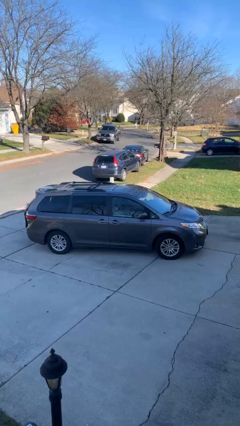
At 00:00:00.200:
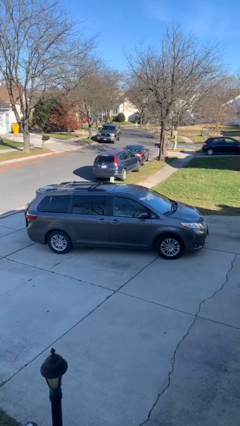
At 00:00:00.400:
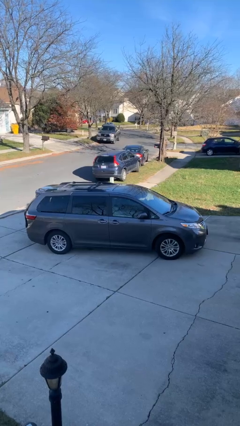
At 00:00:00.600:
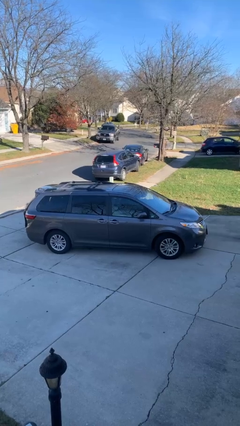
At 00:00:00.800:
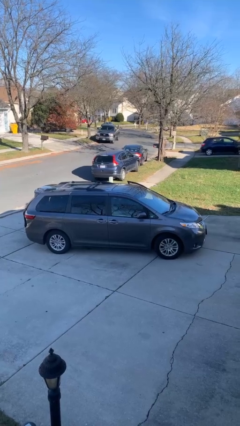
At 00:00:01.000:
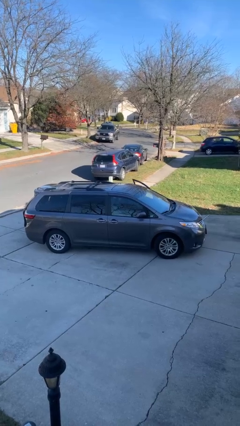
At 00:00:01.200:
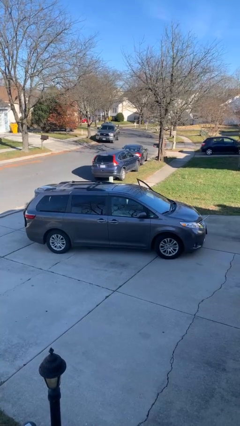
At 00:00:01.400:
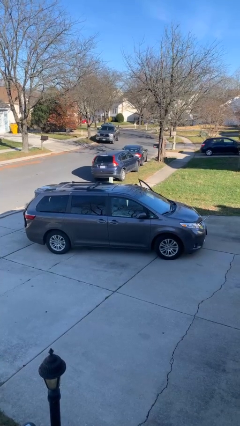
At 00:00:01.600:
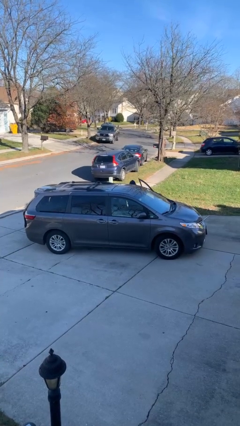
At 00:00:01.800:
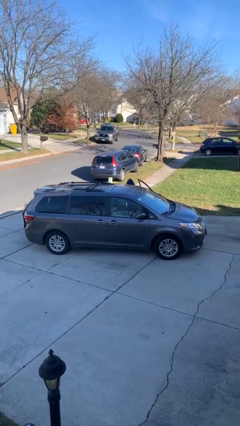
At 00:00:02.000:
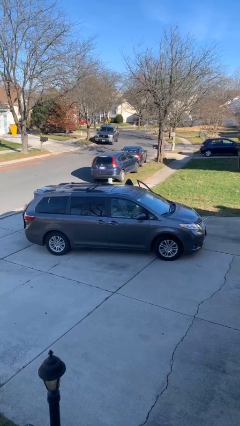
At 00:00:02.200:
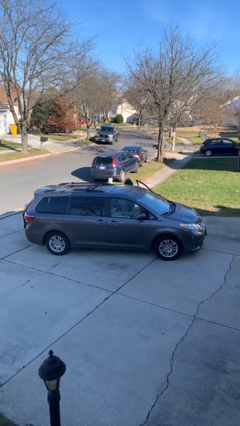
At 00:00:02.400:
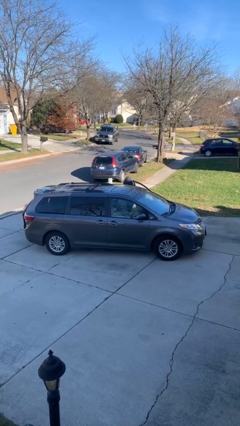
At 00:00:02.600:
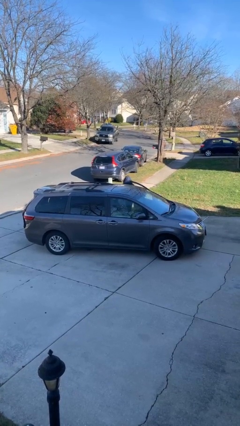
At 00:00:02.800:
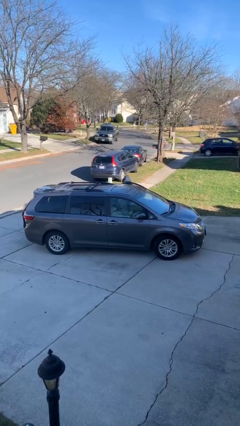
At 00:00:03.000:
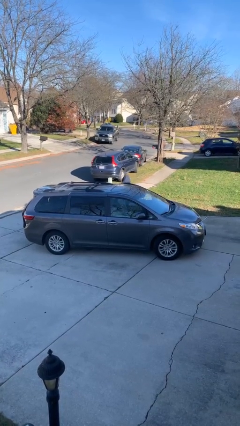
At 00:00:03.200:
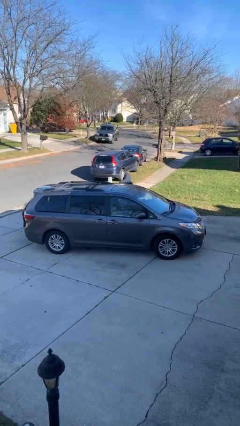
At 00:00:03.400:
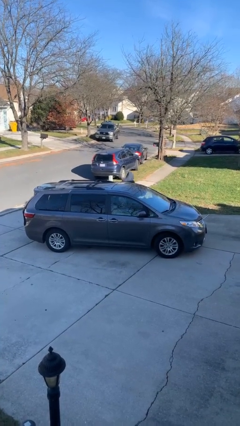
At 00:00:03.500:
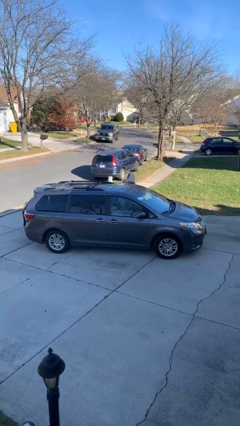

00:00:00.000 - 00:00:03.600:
car drops off person

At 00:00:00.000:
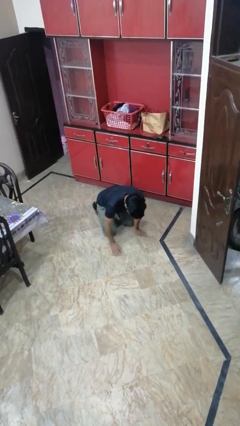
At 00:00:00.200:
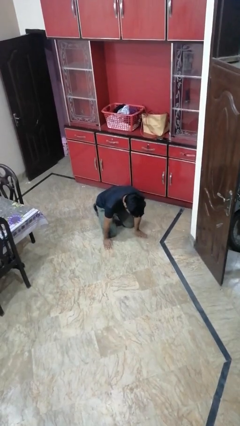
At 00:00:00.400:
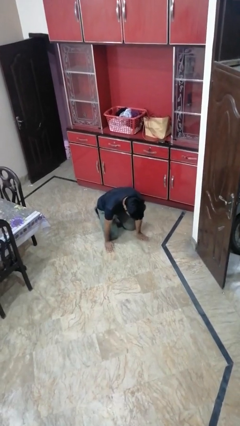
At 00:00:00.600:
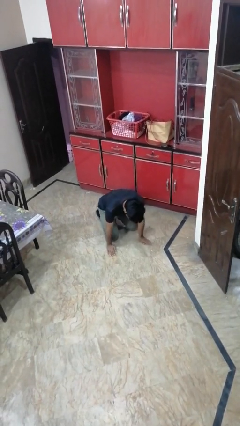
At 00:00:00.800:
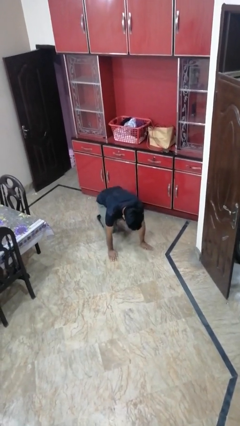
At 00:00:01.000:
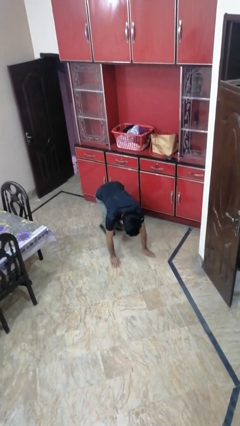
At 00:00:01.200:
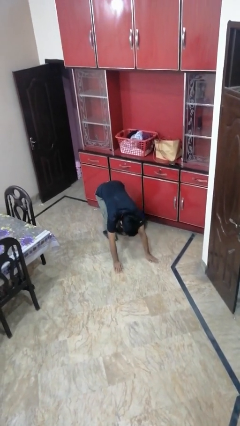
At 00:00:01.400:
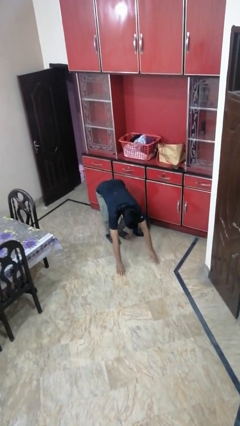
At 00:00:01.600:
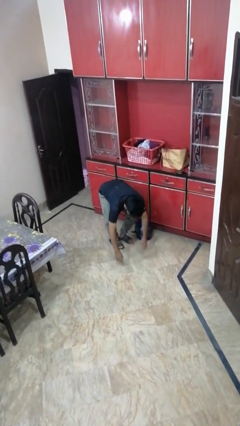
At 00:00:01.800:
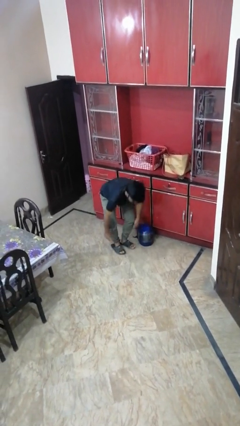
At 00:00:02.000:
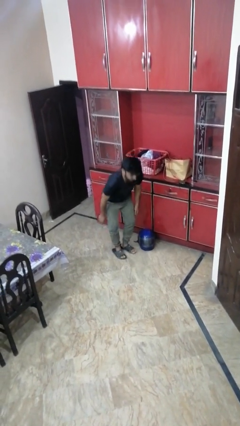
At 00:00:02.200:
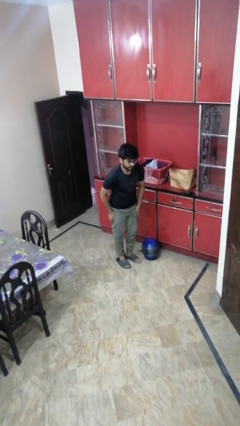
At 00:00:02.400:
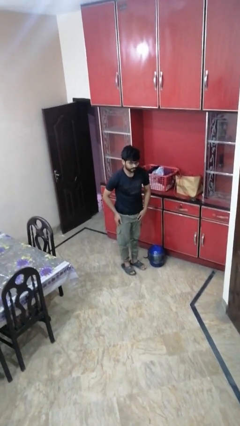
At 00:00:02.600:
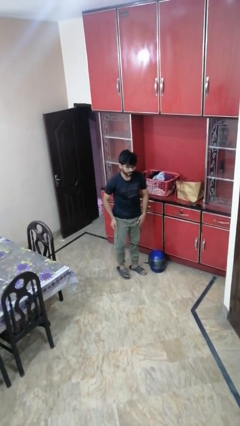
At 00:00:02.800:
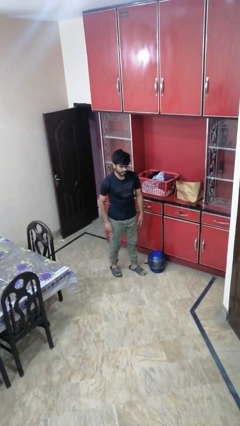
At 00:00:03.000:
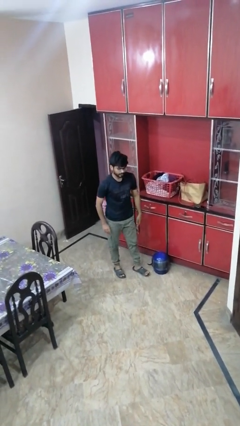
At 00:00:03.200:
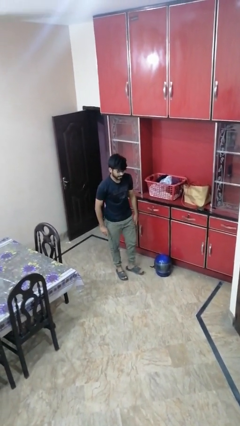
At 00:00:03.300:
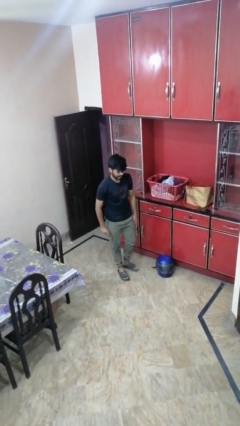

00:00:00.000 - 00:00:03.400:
person stands up from floor

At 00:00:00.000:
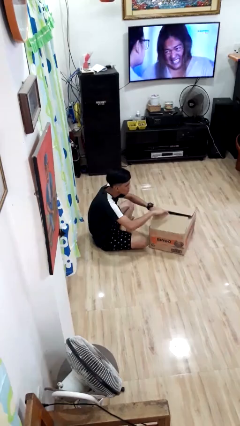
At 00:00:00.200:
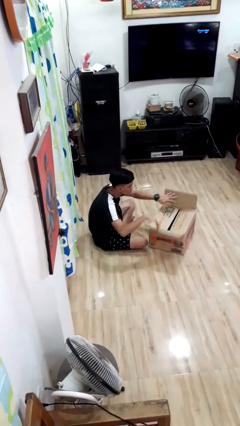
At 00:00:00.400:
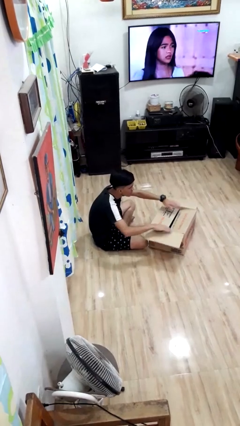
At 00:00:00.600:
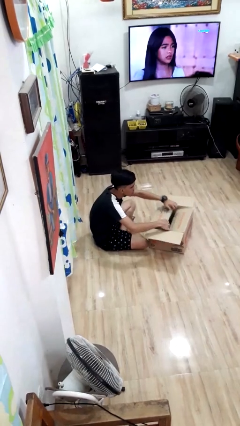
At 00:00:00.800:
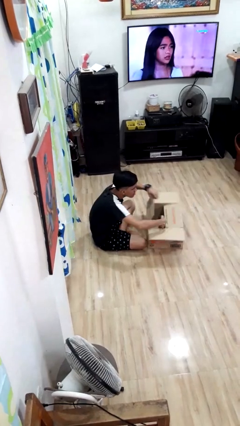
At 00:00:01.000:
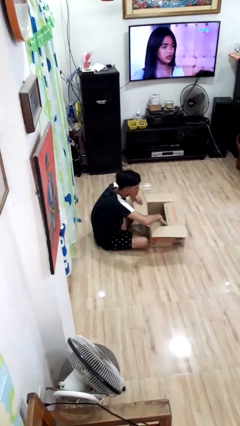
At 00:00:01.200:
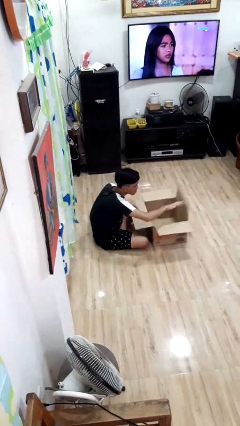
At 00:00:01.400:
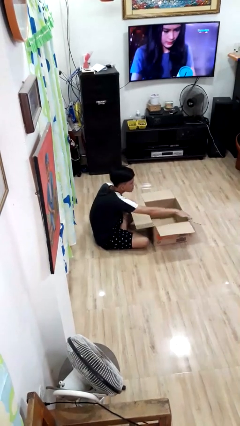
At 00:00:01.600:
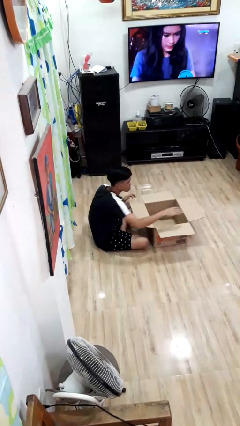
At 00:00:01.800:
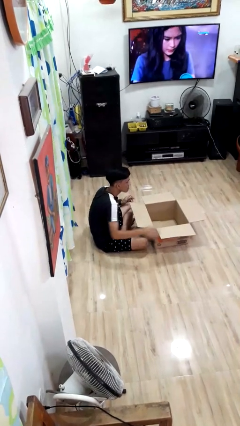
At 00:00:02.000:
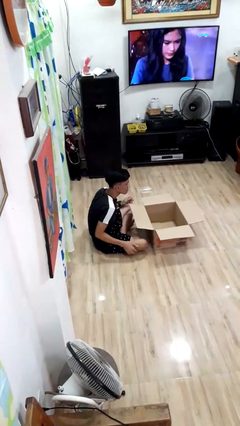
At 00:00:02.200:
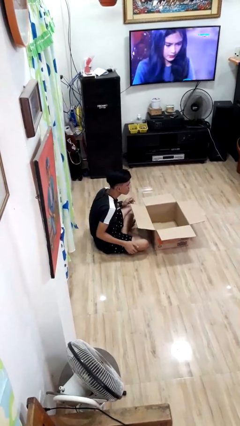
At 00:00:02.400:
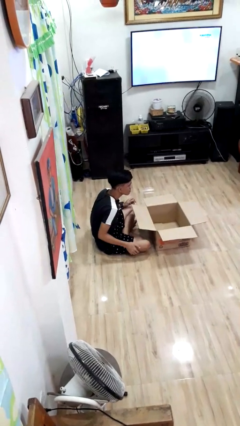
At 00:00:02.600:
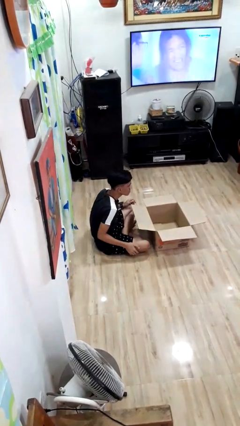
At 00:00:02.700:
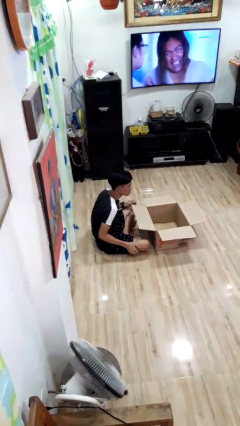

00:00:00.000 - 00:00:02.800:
person opens box

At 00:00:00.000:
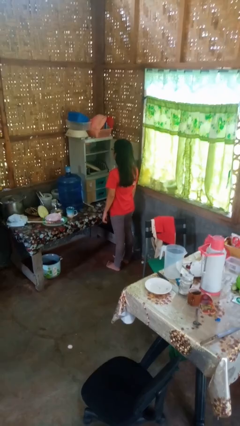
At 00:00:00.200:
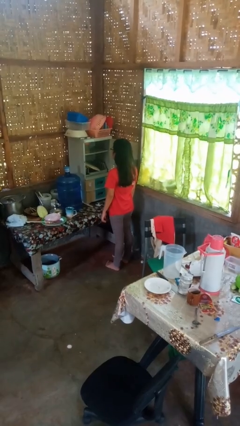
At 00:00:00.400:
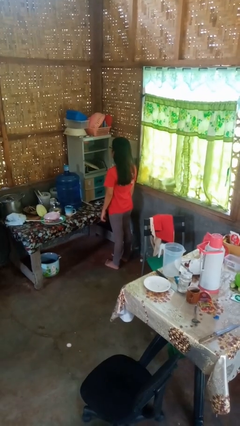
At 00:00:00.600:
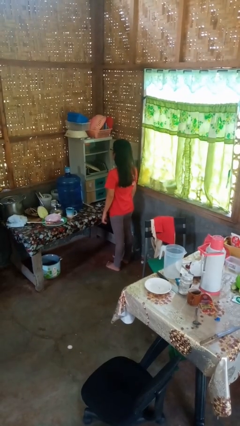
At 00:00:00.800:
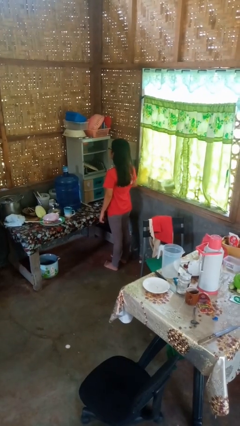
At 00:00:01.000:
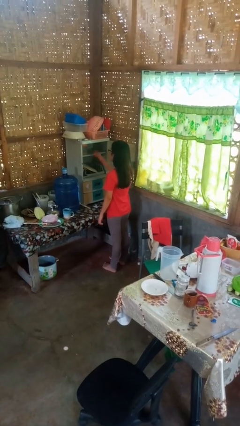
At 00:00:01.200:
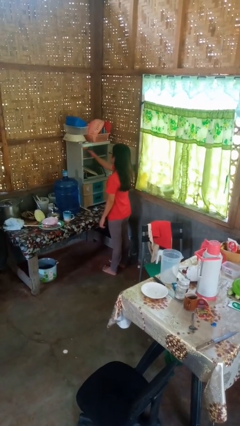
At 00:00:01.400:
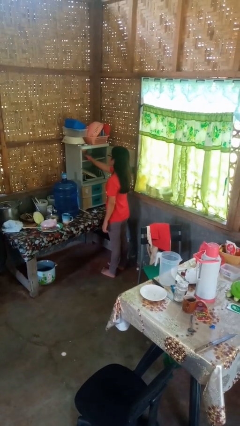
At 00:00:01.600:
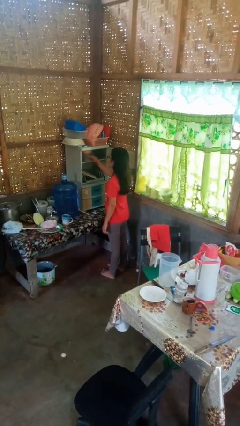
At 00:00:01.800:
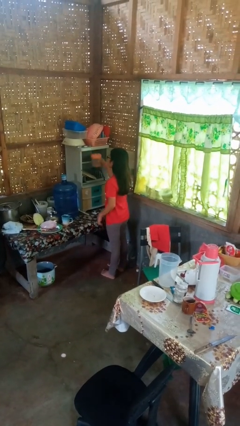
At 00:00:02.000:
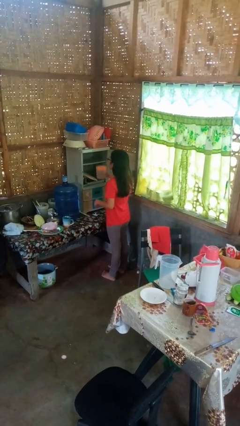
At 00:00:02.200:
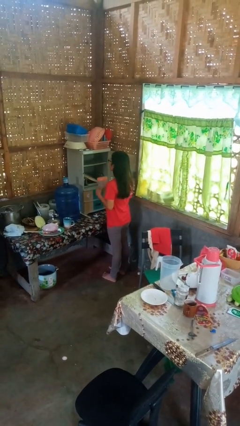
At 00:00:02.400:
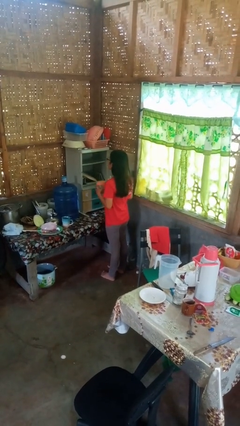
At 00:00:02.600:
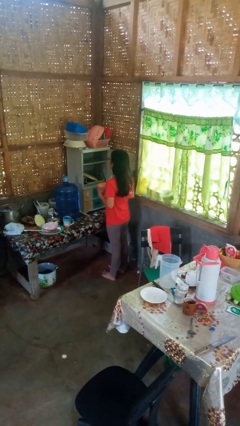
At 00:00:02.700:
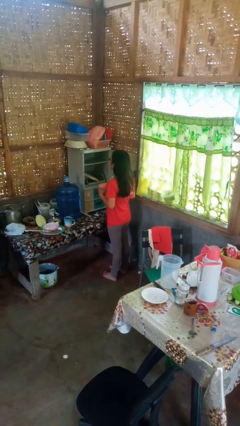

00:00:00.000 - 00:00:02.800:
person picks up object from cabinet

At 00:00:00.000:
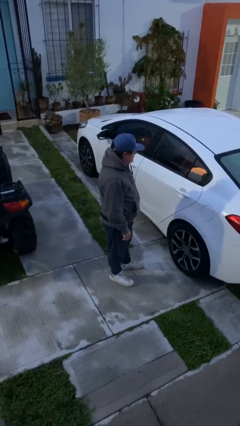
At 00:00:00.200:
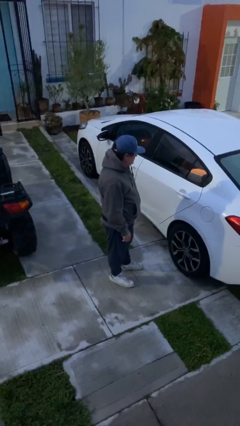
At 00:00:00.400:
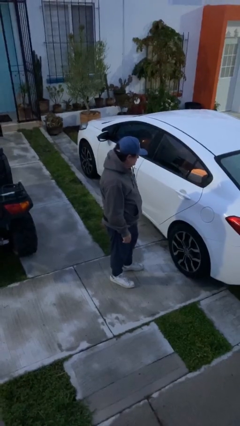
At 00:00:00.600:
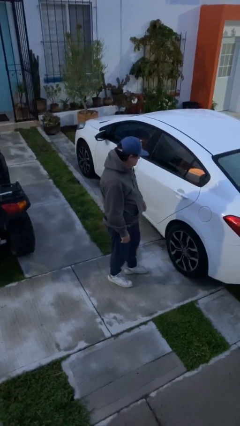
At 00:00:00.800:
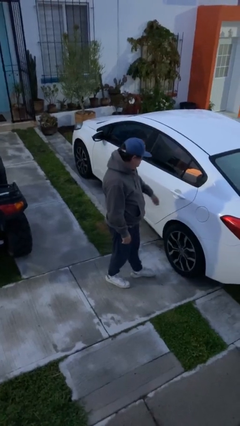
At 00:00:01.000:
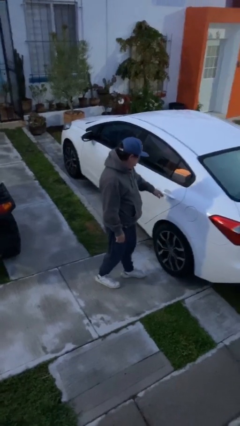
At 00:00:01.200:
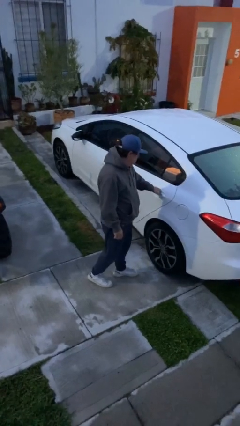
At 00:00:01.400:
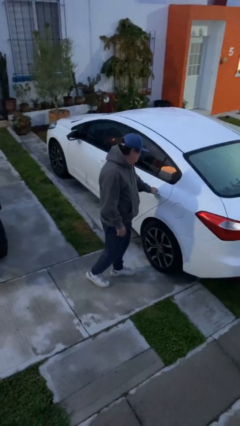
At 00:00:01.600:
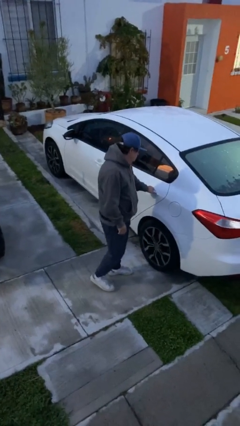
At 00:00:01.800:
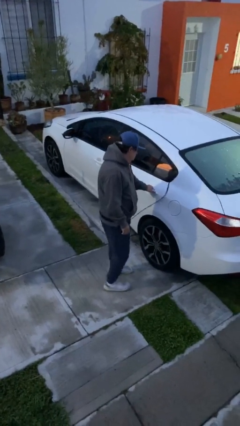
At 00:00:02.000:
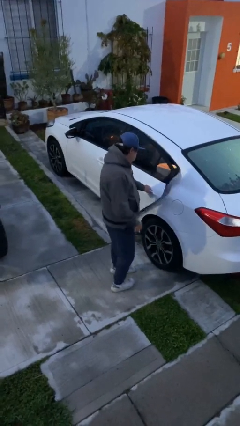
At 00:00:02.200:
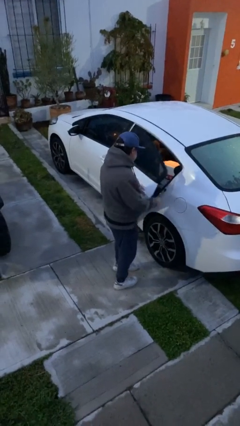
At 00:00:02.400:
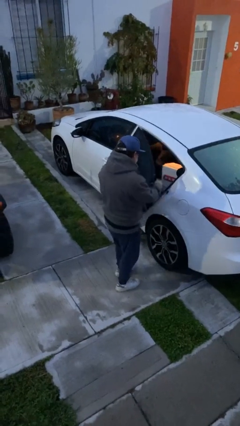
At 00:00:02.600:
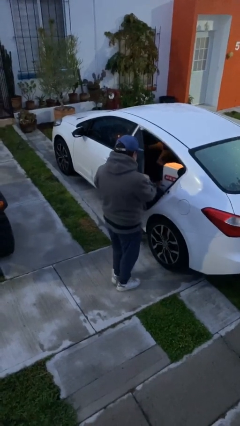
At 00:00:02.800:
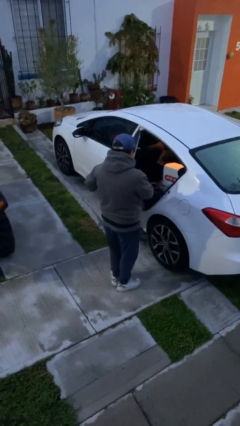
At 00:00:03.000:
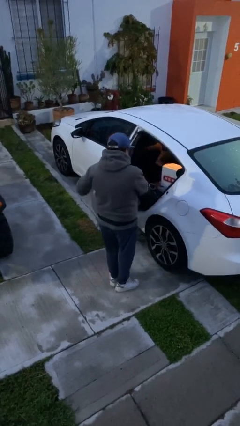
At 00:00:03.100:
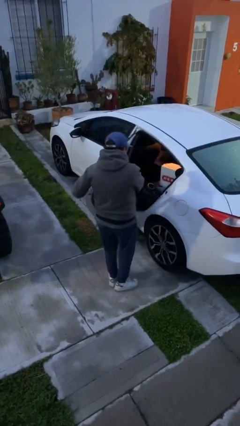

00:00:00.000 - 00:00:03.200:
person opens car door

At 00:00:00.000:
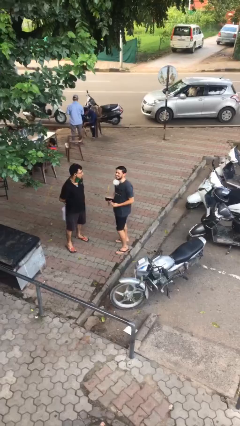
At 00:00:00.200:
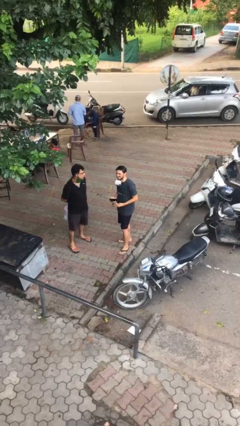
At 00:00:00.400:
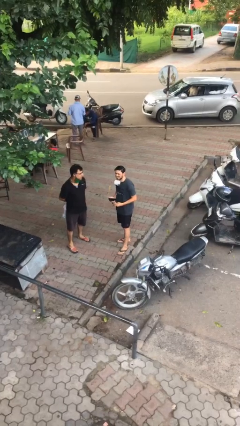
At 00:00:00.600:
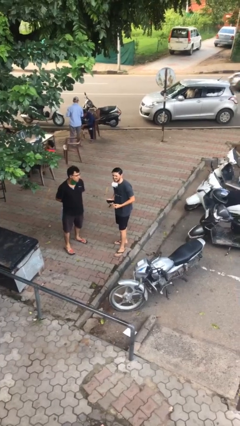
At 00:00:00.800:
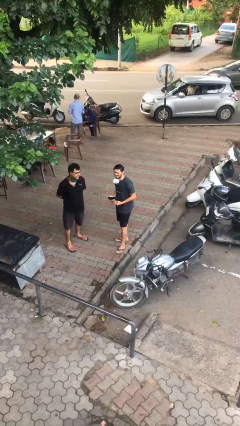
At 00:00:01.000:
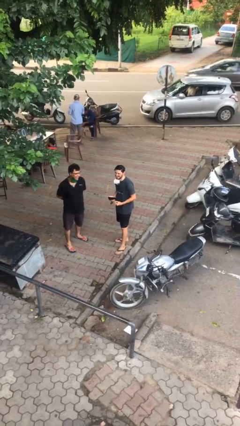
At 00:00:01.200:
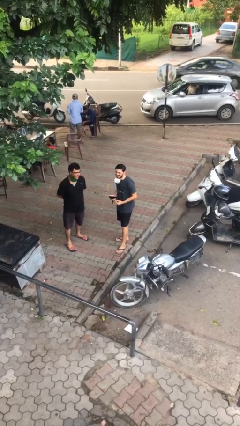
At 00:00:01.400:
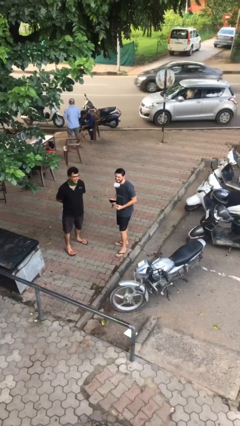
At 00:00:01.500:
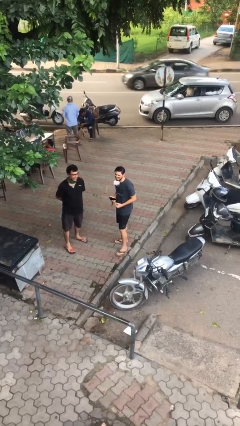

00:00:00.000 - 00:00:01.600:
person laughs with person
